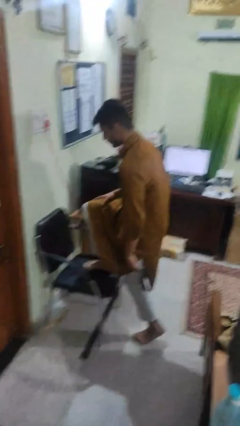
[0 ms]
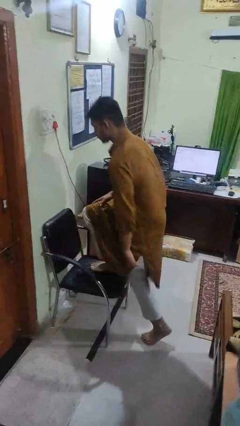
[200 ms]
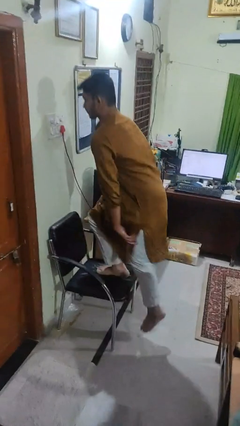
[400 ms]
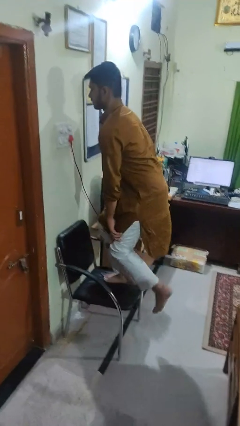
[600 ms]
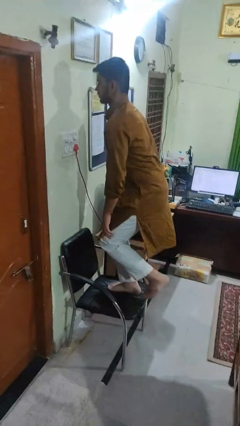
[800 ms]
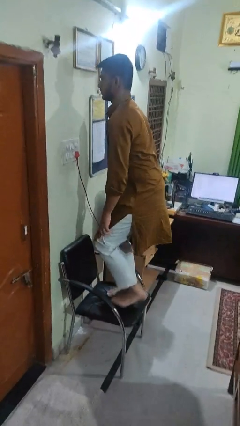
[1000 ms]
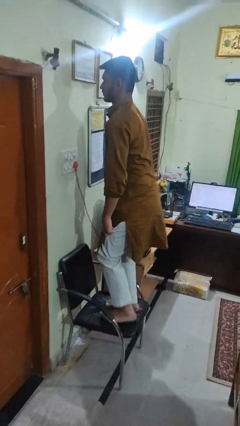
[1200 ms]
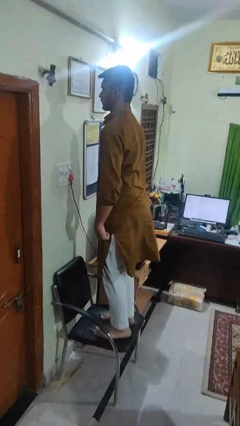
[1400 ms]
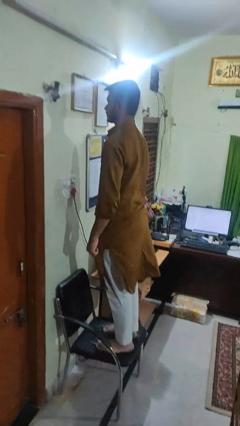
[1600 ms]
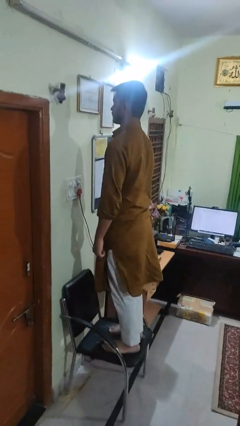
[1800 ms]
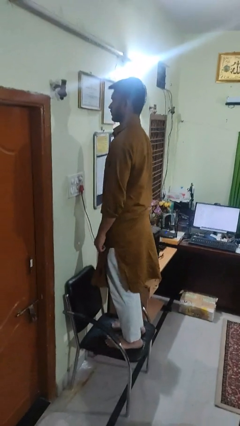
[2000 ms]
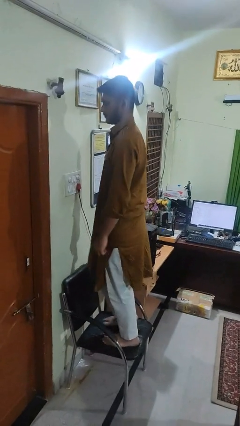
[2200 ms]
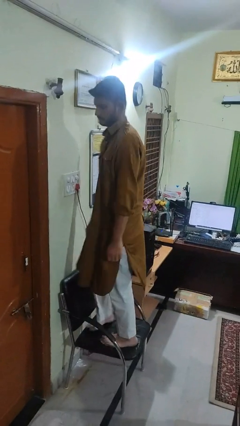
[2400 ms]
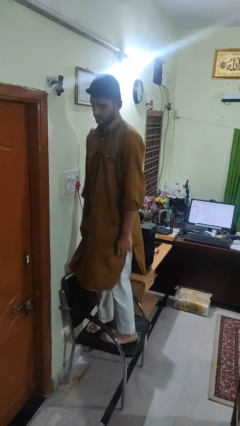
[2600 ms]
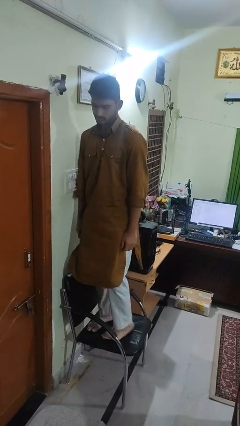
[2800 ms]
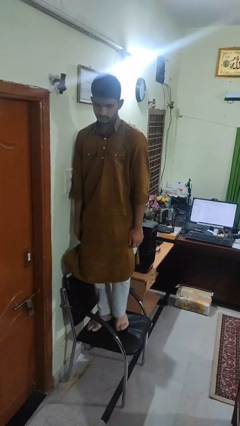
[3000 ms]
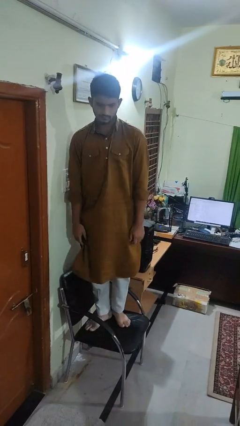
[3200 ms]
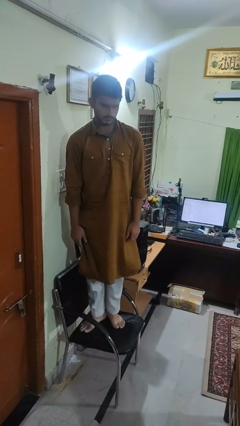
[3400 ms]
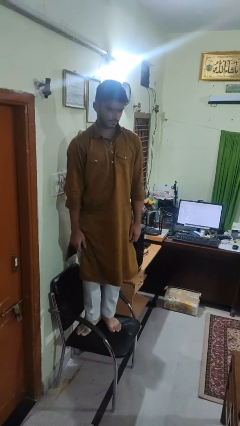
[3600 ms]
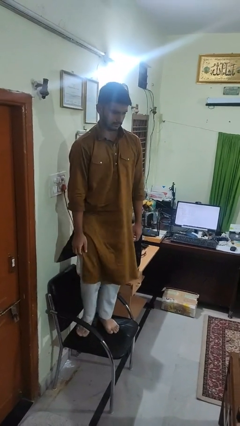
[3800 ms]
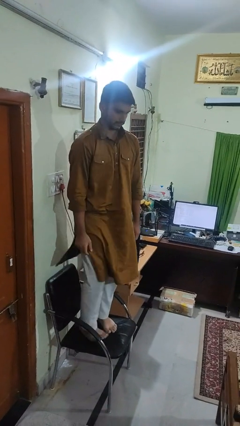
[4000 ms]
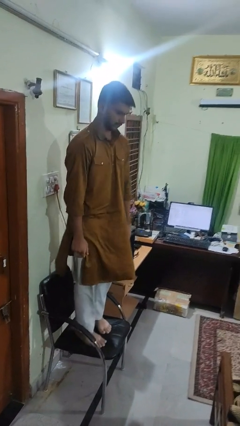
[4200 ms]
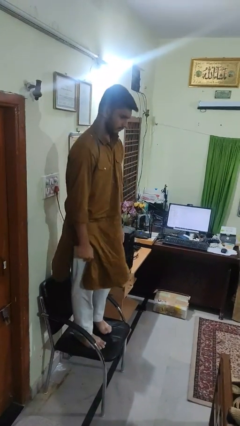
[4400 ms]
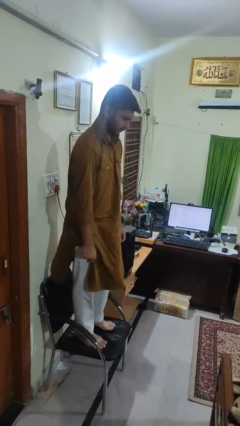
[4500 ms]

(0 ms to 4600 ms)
person climbs on chair

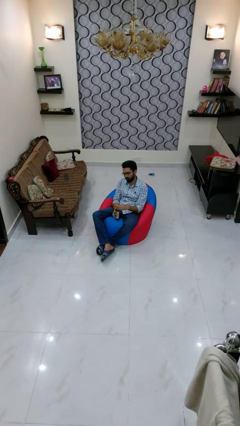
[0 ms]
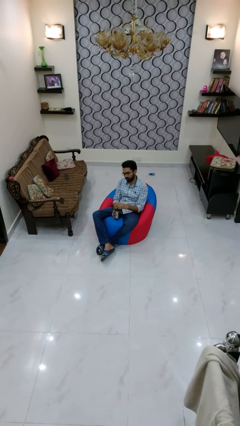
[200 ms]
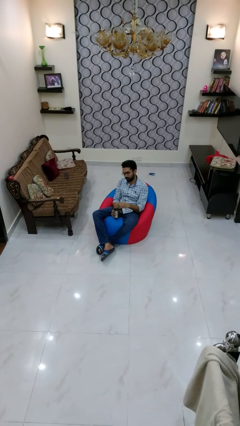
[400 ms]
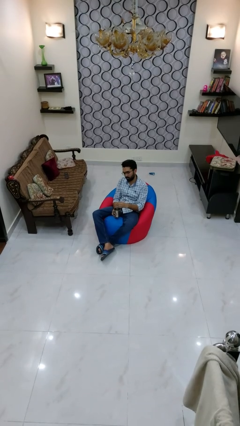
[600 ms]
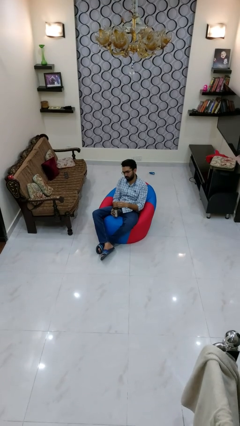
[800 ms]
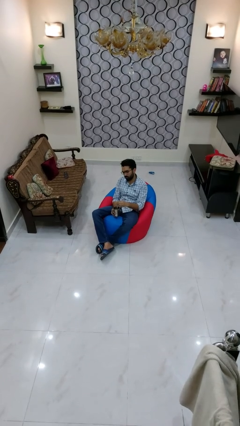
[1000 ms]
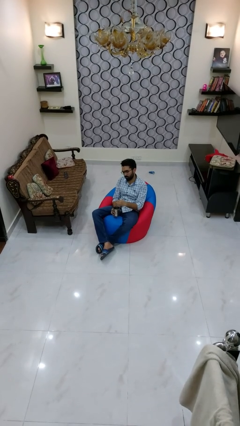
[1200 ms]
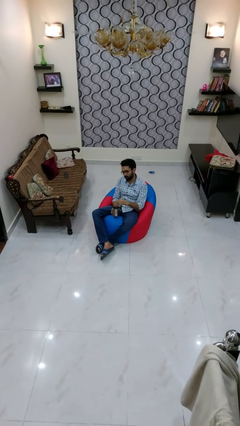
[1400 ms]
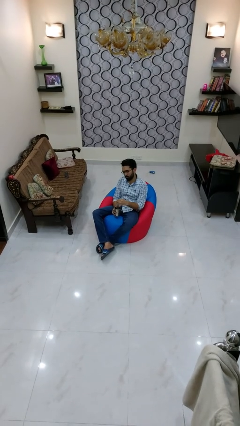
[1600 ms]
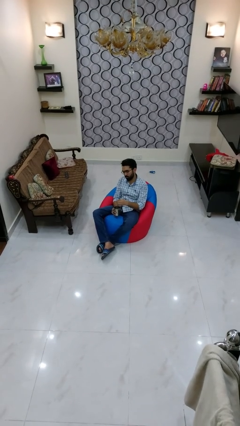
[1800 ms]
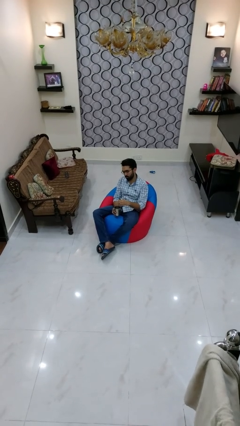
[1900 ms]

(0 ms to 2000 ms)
person stirs mug

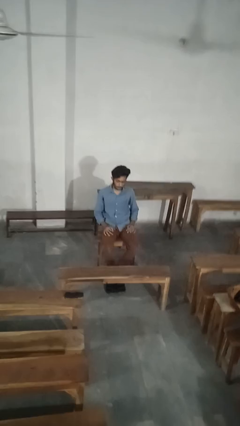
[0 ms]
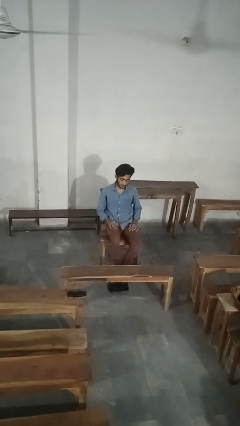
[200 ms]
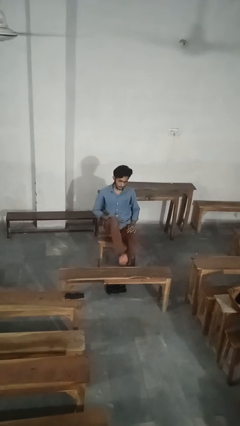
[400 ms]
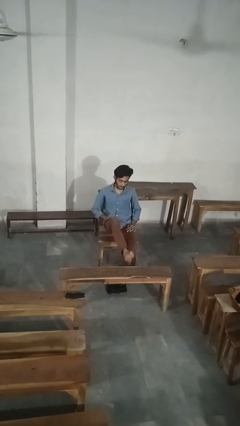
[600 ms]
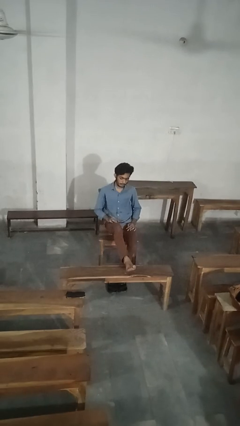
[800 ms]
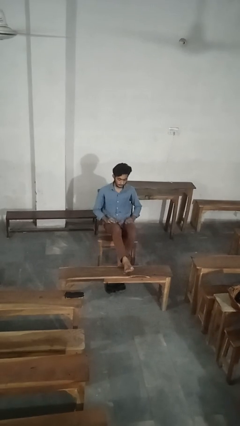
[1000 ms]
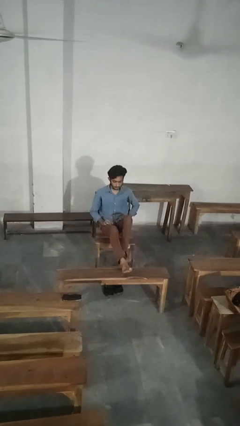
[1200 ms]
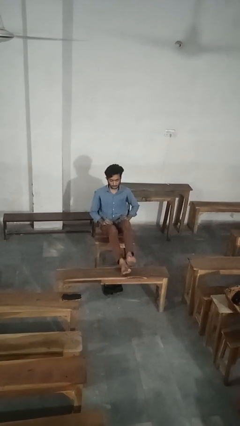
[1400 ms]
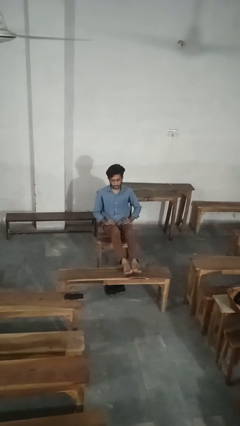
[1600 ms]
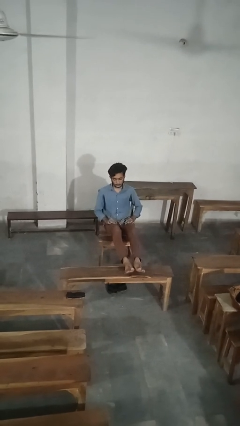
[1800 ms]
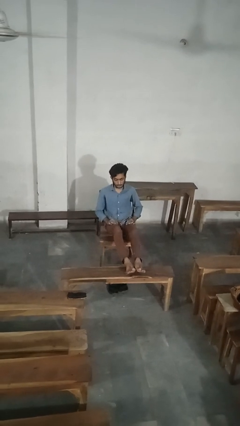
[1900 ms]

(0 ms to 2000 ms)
person puts feet up

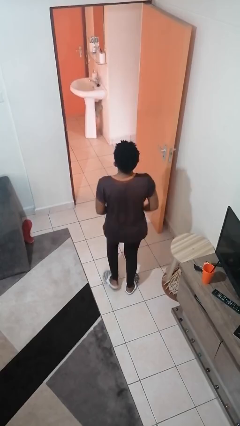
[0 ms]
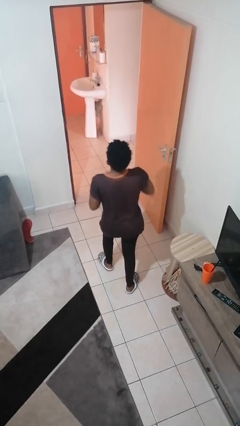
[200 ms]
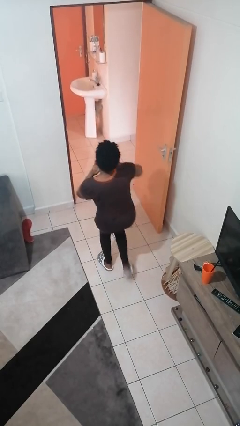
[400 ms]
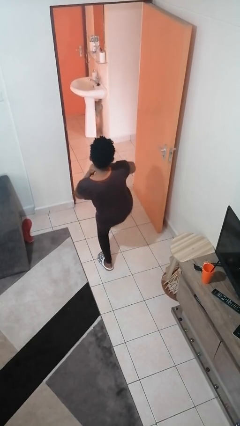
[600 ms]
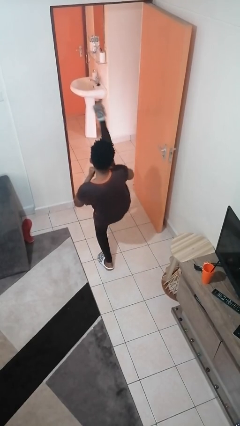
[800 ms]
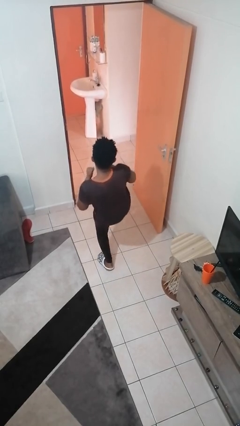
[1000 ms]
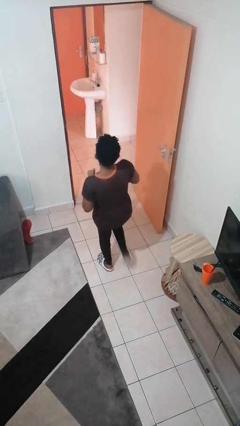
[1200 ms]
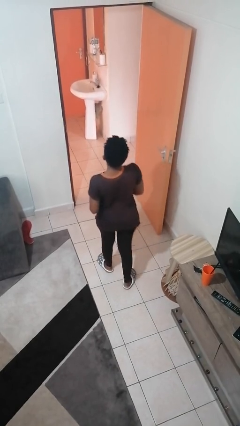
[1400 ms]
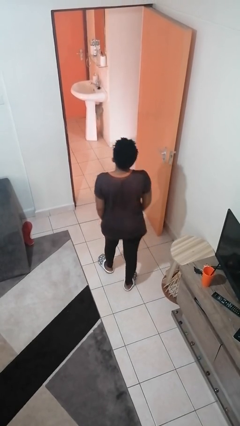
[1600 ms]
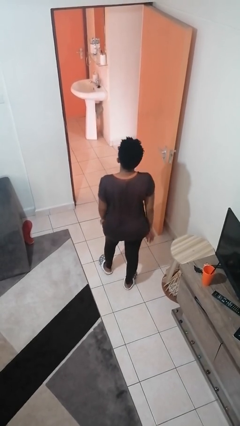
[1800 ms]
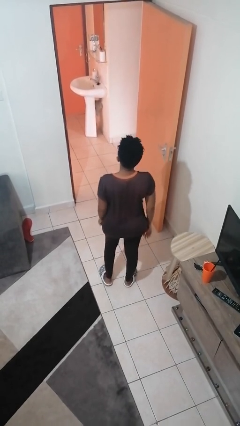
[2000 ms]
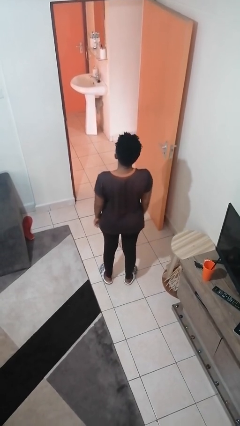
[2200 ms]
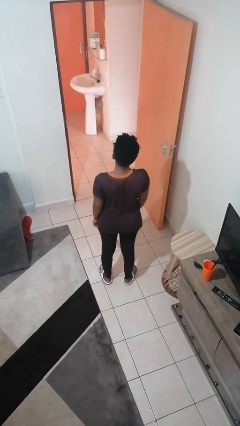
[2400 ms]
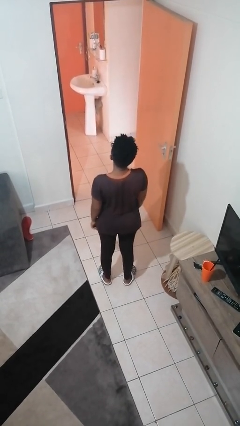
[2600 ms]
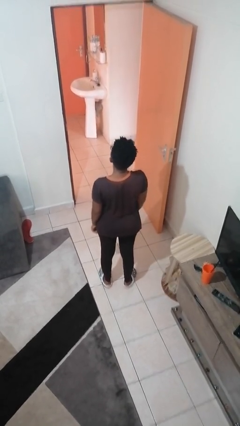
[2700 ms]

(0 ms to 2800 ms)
person karate kicks

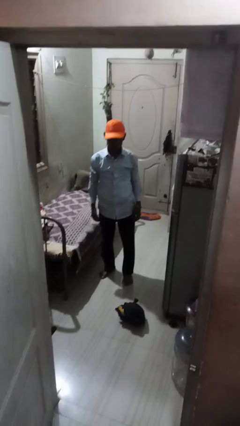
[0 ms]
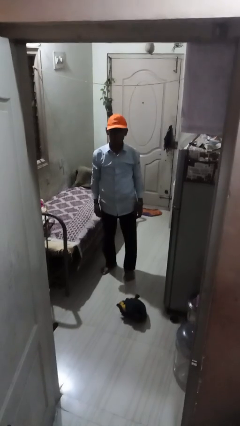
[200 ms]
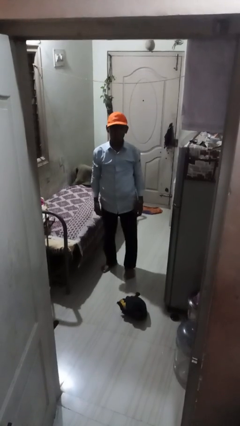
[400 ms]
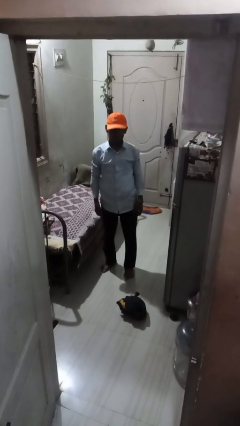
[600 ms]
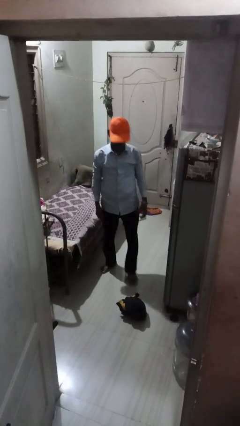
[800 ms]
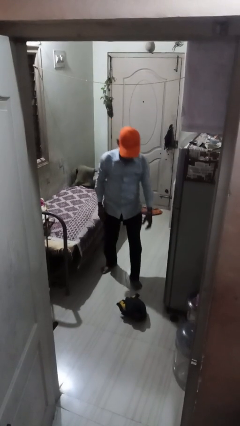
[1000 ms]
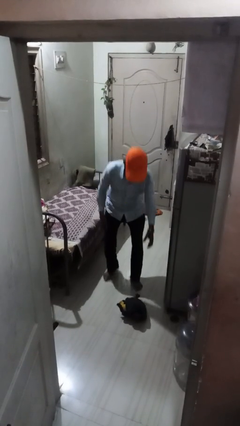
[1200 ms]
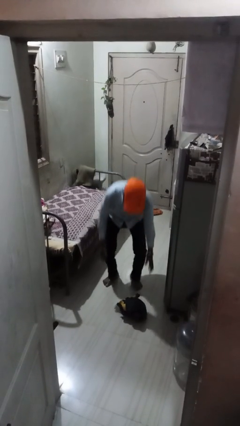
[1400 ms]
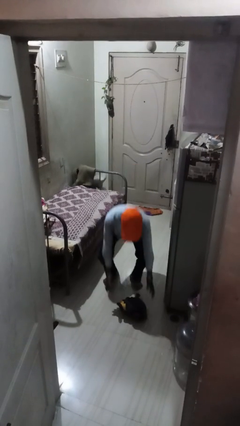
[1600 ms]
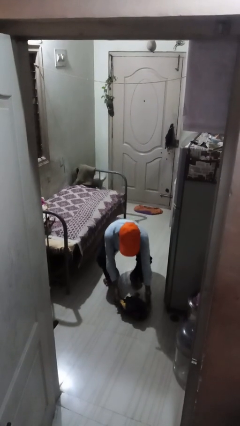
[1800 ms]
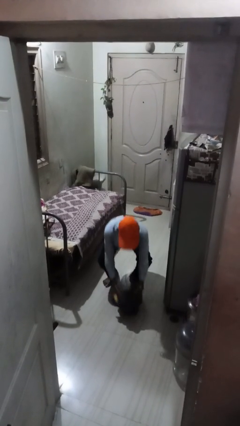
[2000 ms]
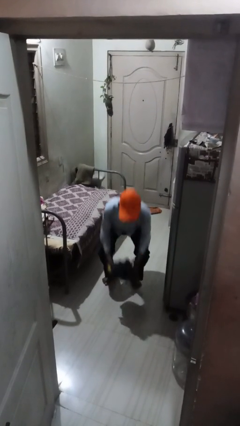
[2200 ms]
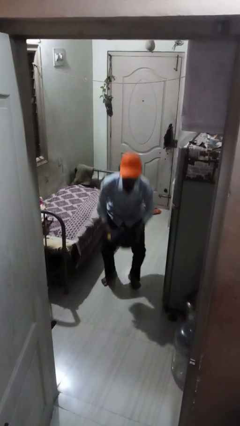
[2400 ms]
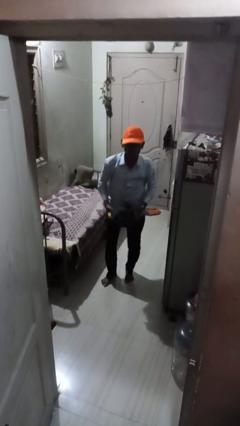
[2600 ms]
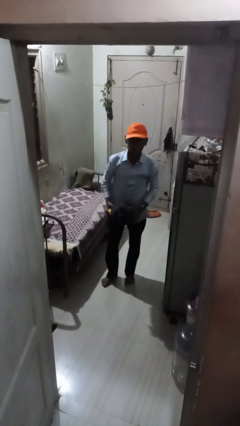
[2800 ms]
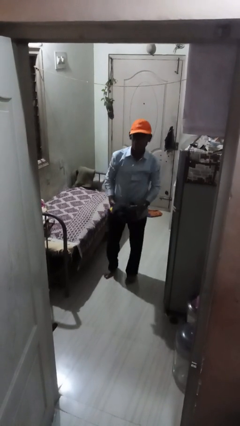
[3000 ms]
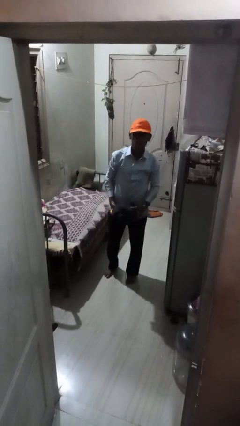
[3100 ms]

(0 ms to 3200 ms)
person picks up object from floor

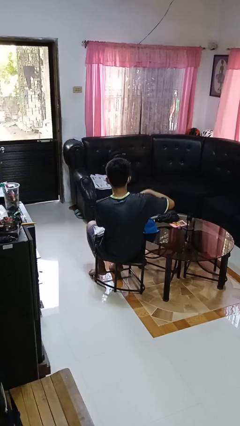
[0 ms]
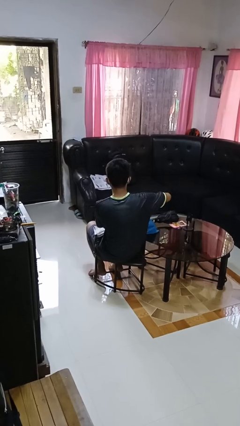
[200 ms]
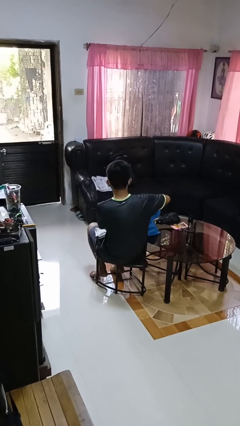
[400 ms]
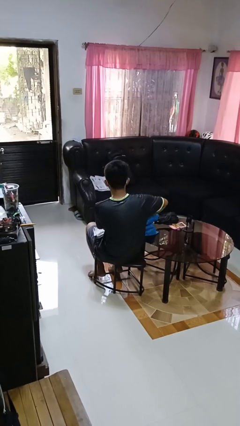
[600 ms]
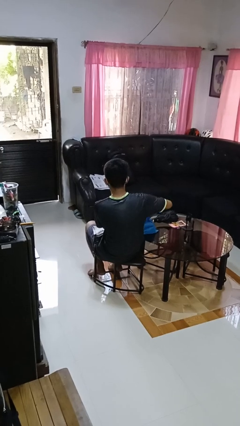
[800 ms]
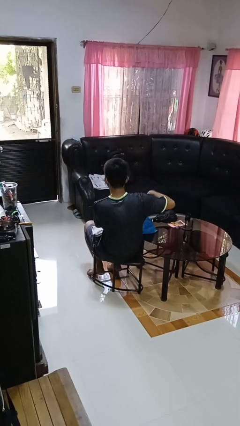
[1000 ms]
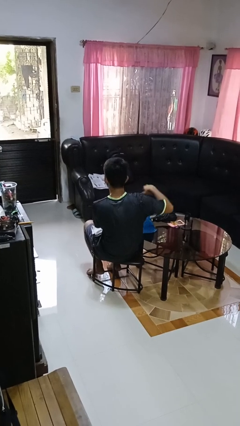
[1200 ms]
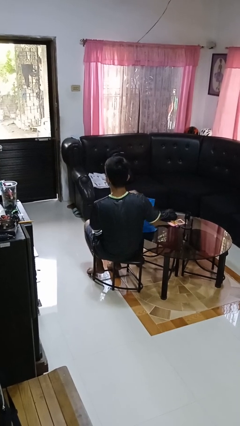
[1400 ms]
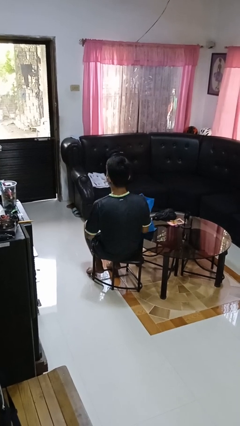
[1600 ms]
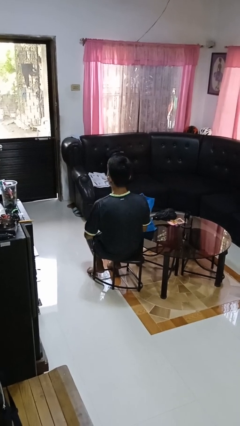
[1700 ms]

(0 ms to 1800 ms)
person puts object into bag

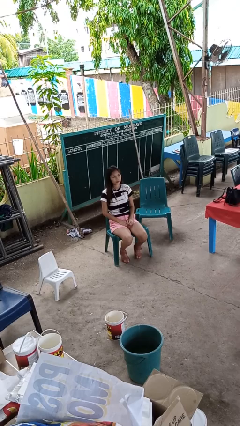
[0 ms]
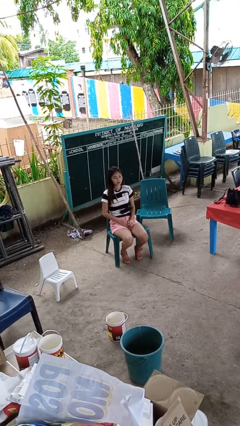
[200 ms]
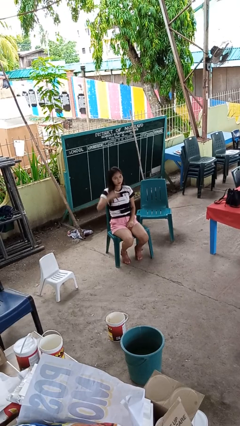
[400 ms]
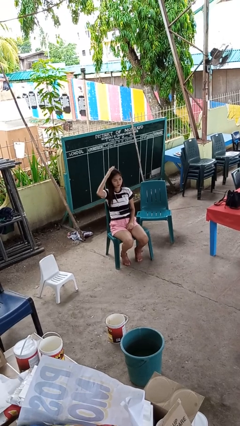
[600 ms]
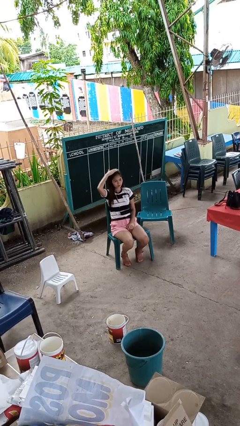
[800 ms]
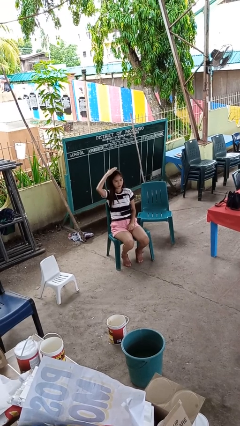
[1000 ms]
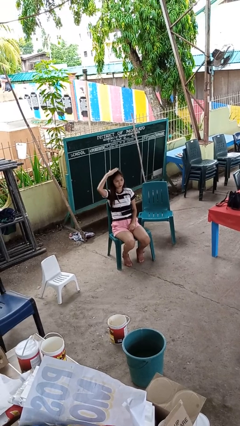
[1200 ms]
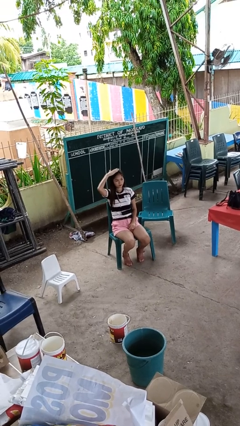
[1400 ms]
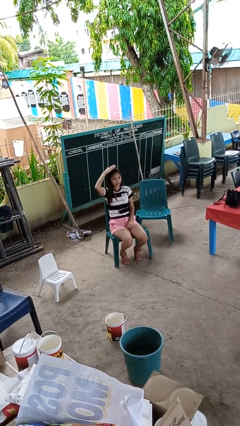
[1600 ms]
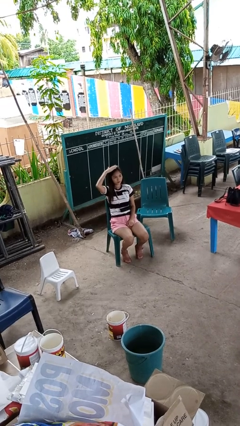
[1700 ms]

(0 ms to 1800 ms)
person pats head
